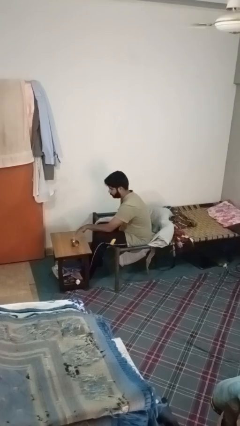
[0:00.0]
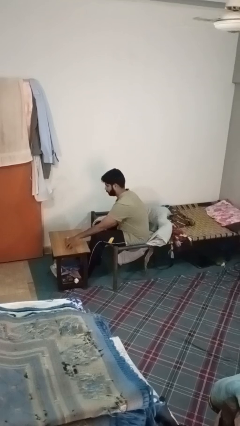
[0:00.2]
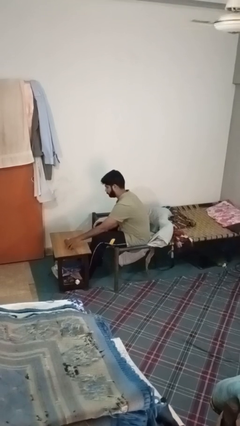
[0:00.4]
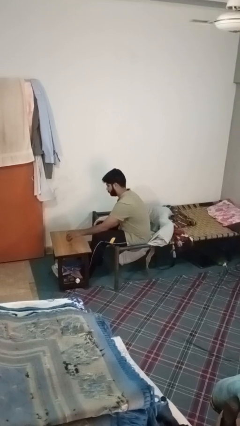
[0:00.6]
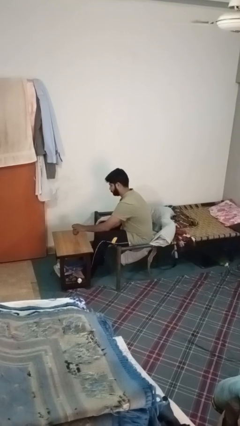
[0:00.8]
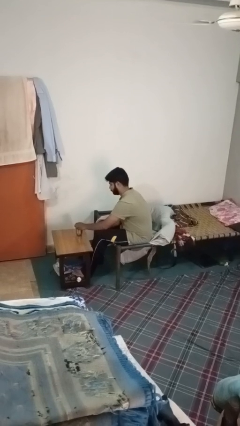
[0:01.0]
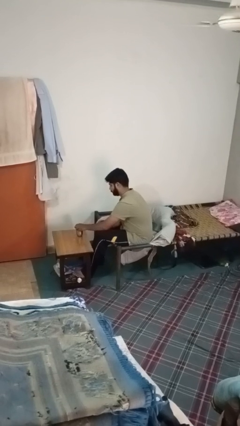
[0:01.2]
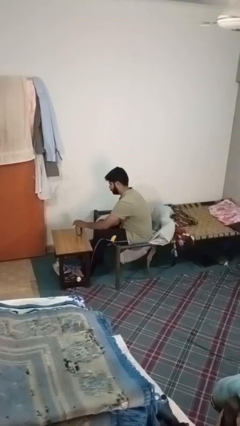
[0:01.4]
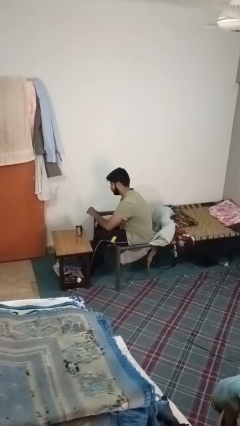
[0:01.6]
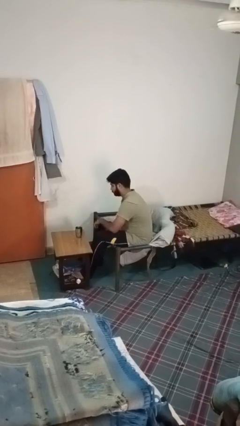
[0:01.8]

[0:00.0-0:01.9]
person sets upright glass

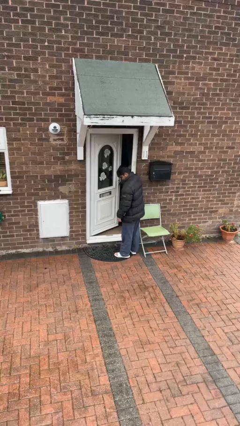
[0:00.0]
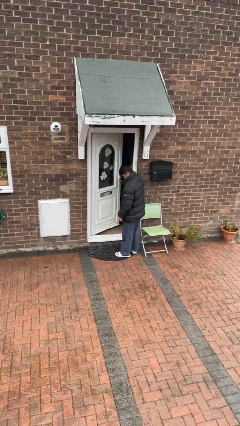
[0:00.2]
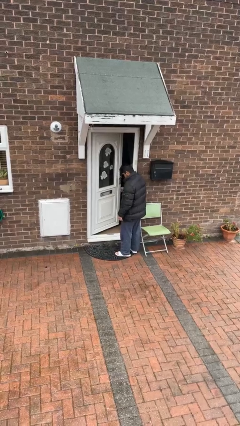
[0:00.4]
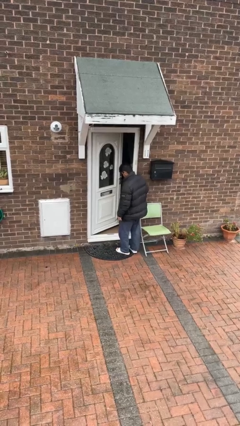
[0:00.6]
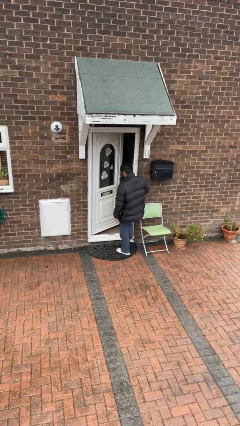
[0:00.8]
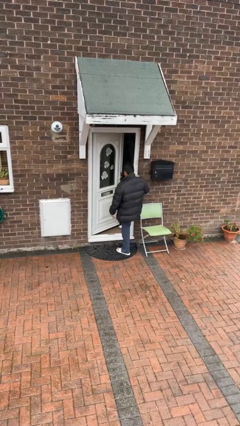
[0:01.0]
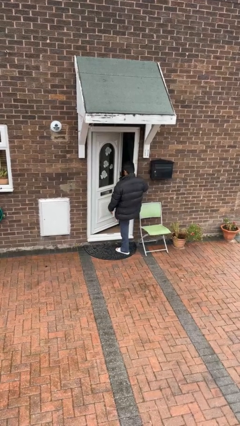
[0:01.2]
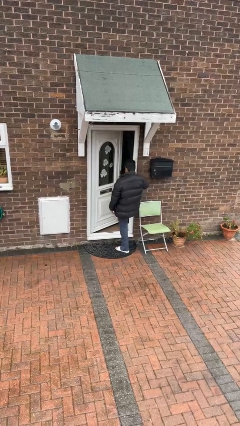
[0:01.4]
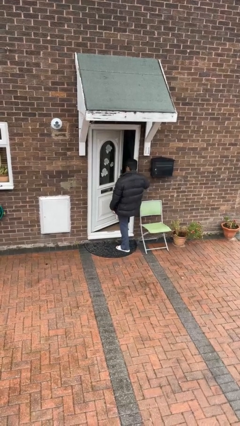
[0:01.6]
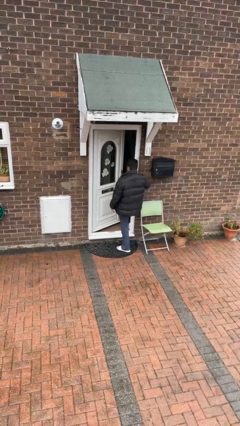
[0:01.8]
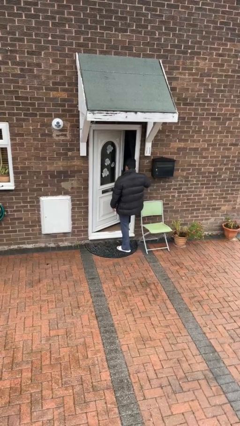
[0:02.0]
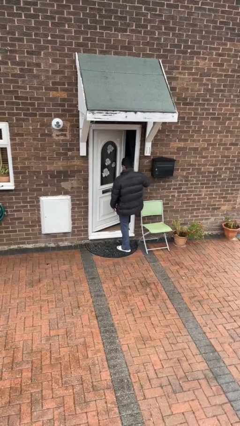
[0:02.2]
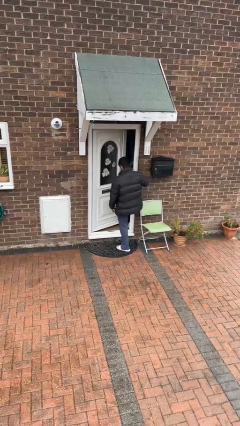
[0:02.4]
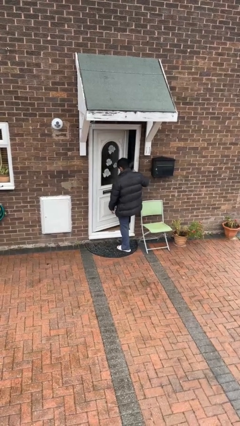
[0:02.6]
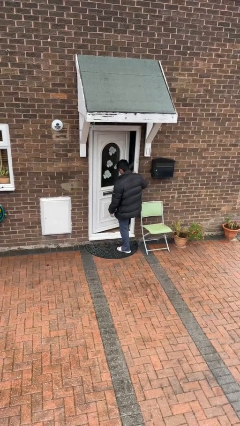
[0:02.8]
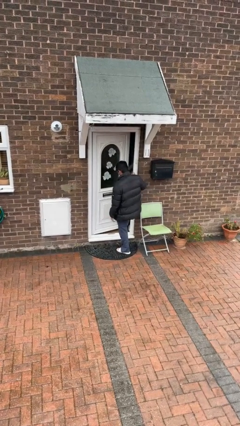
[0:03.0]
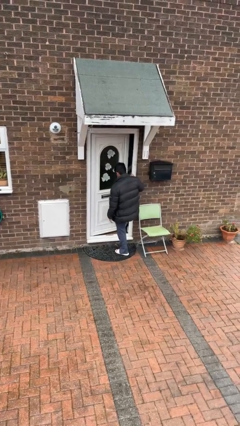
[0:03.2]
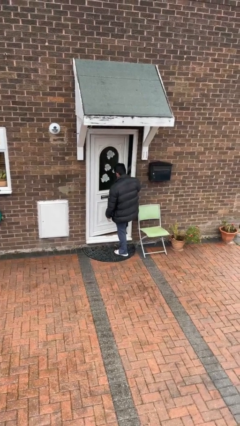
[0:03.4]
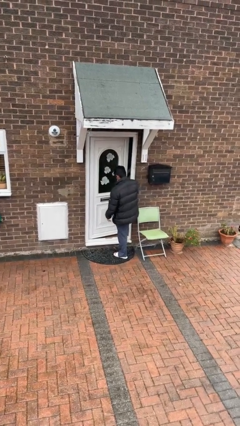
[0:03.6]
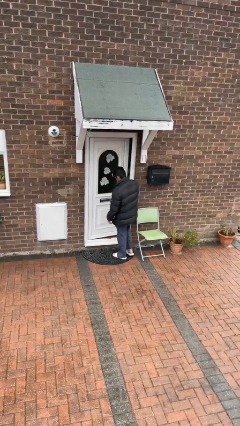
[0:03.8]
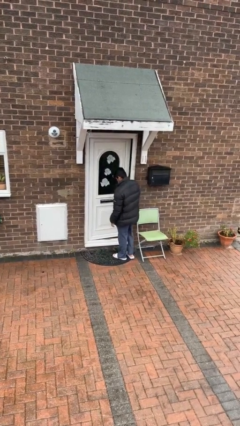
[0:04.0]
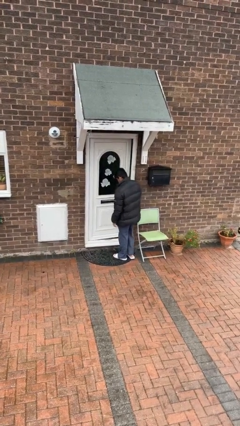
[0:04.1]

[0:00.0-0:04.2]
person closes door with foot

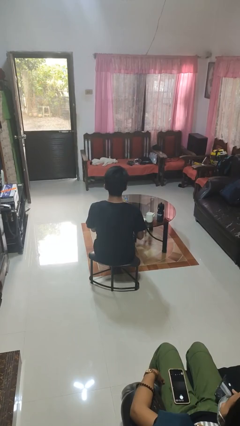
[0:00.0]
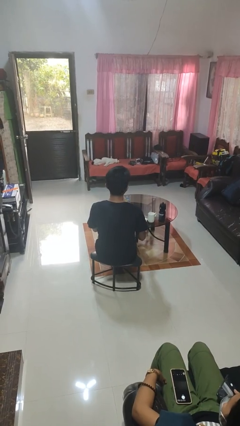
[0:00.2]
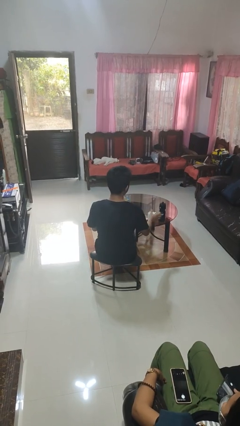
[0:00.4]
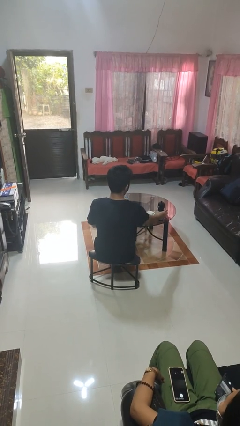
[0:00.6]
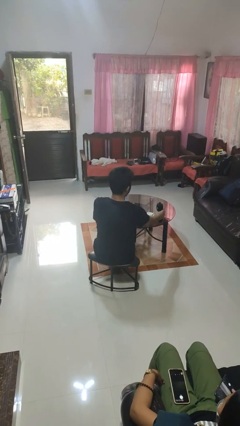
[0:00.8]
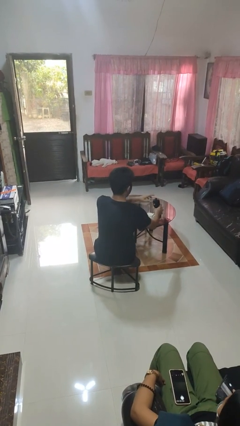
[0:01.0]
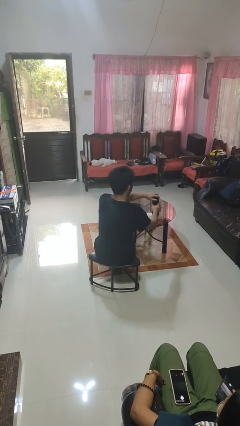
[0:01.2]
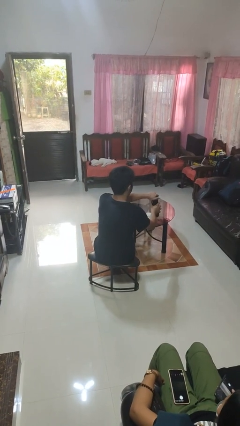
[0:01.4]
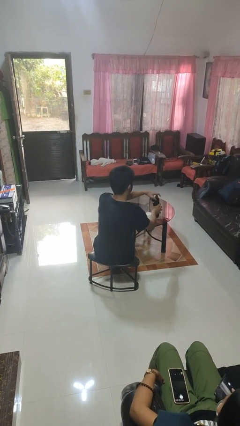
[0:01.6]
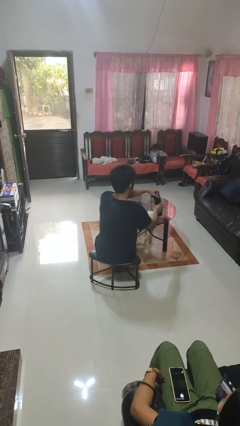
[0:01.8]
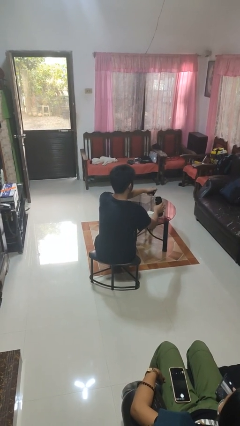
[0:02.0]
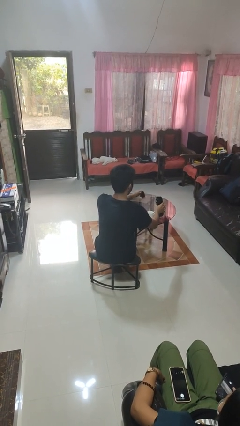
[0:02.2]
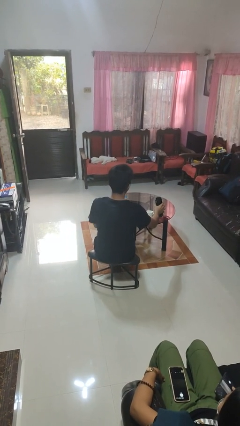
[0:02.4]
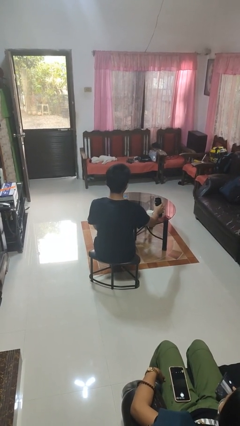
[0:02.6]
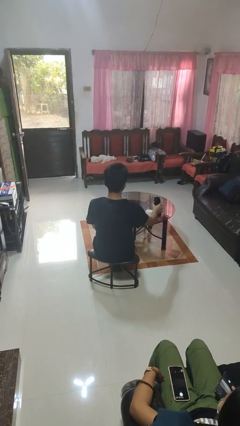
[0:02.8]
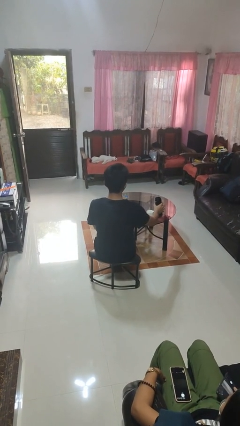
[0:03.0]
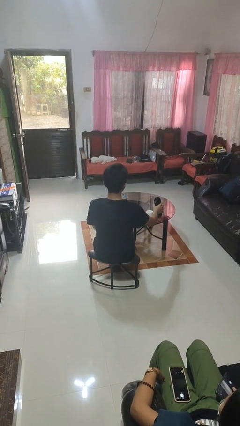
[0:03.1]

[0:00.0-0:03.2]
person unscrews lid from bottle

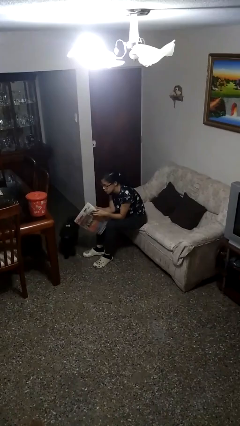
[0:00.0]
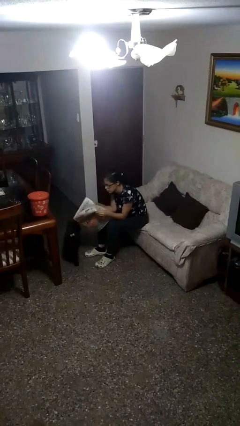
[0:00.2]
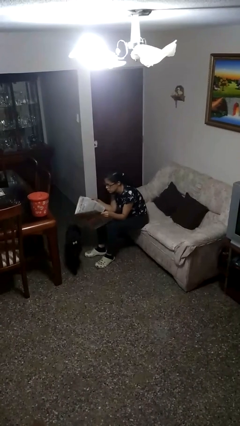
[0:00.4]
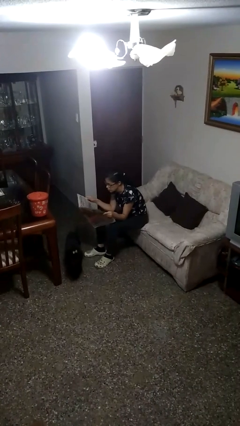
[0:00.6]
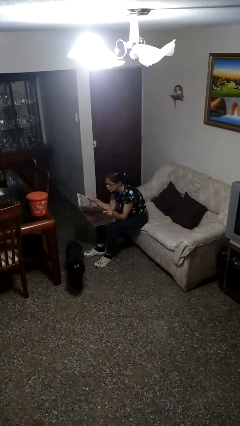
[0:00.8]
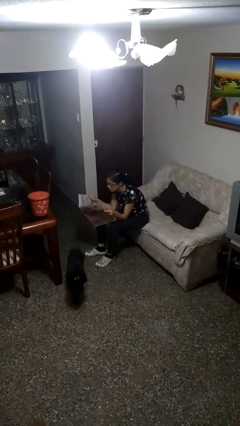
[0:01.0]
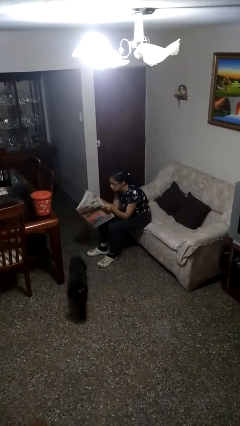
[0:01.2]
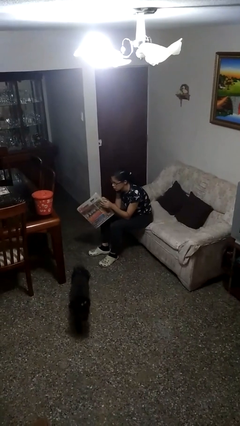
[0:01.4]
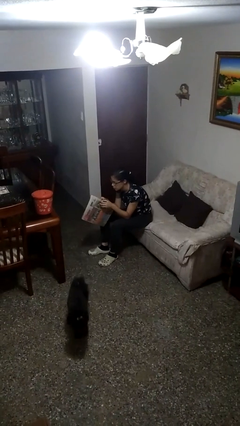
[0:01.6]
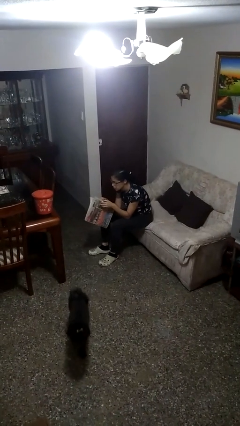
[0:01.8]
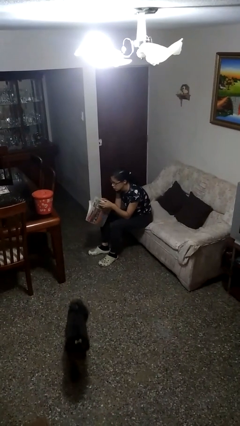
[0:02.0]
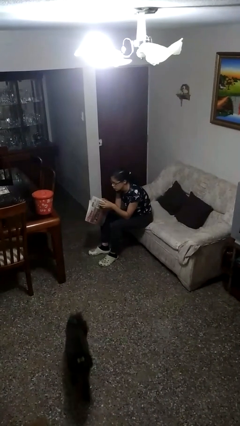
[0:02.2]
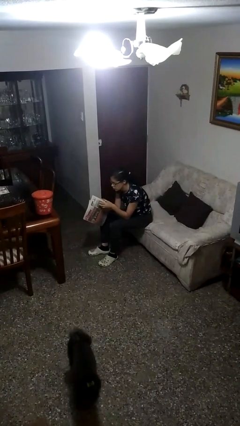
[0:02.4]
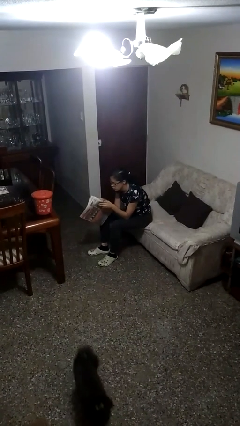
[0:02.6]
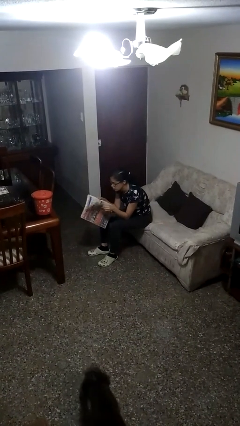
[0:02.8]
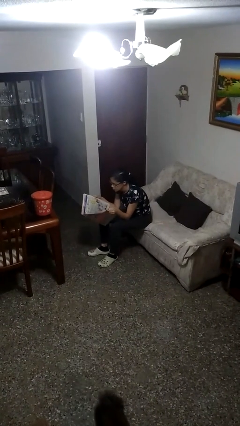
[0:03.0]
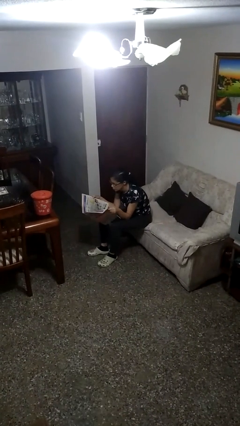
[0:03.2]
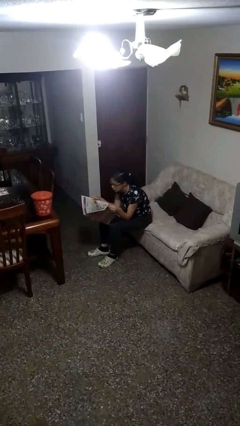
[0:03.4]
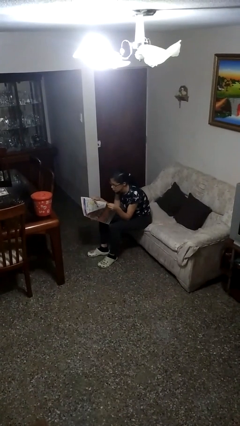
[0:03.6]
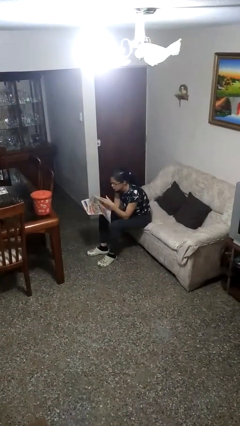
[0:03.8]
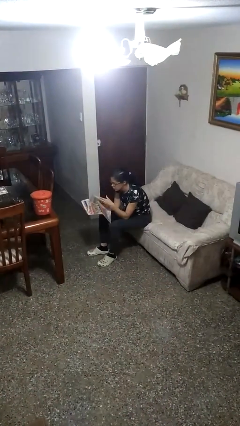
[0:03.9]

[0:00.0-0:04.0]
person reads newspaper

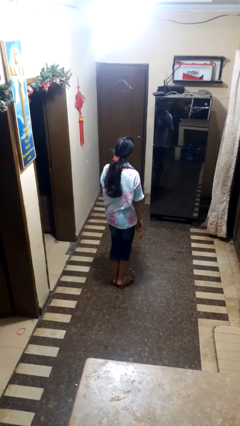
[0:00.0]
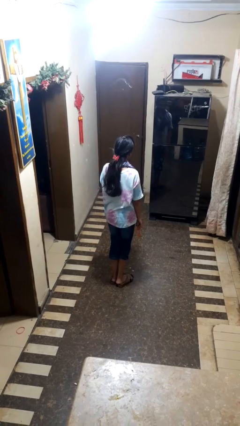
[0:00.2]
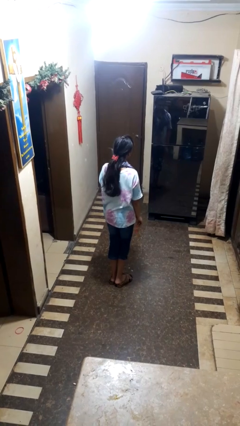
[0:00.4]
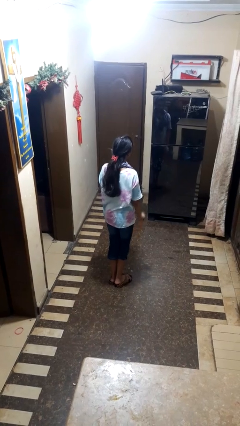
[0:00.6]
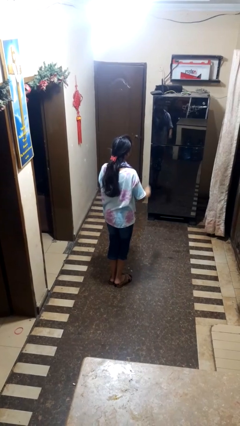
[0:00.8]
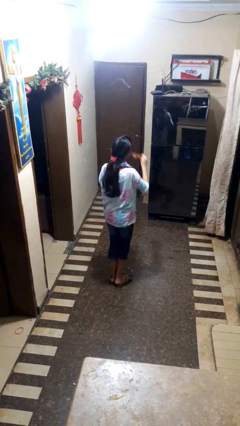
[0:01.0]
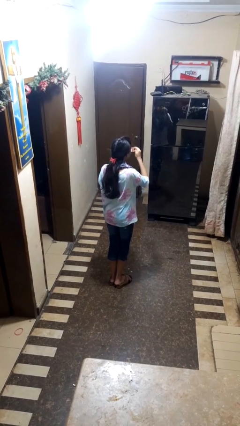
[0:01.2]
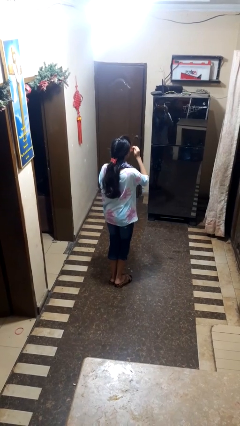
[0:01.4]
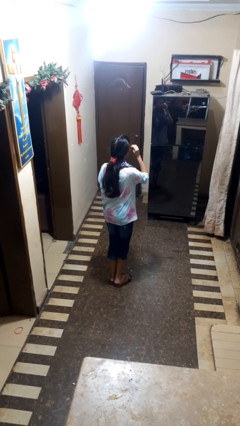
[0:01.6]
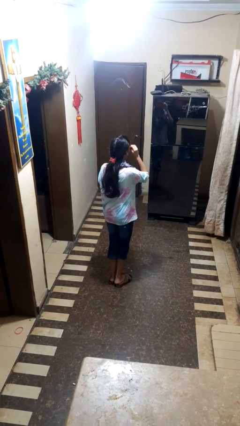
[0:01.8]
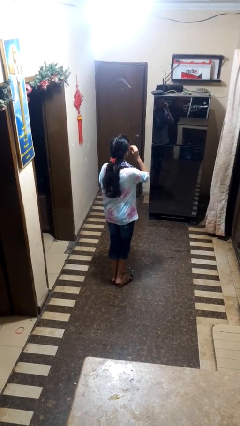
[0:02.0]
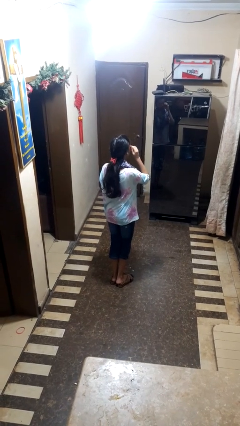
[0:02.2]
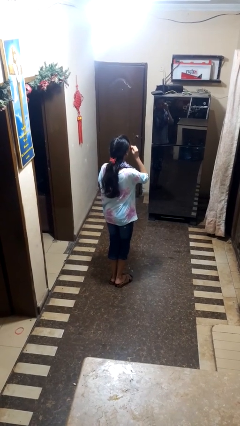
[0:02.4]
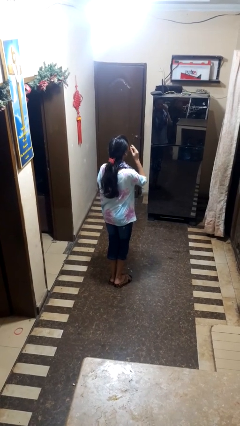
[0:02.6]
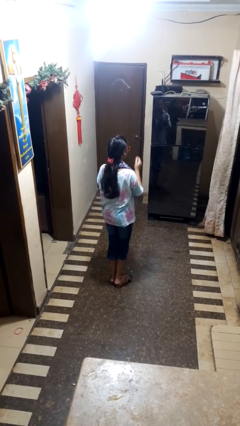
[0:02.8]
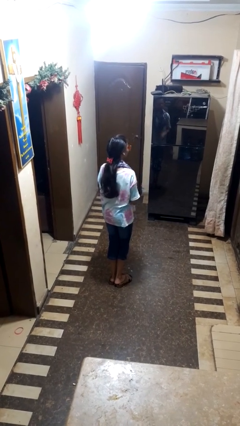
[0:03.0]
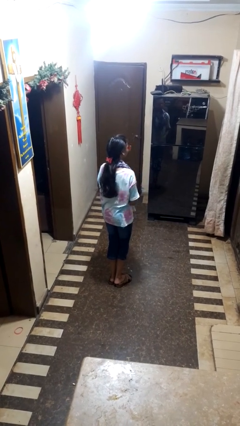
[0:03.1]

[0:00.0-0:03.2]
person puts on sunglasses

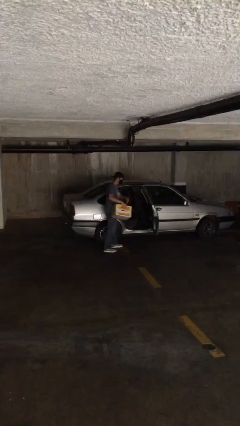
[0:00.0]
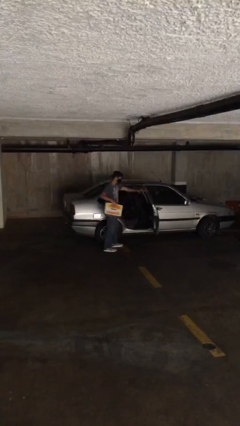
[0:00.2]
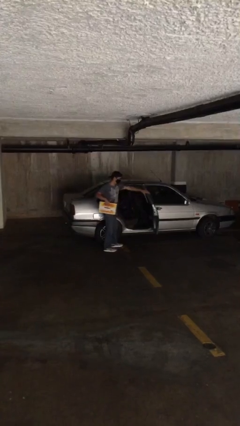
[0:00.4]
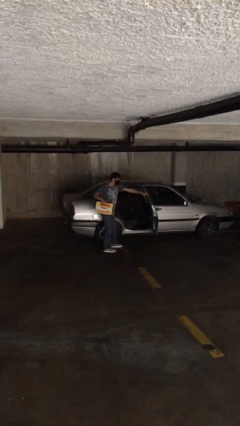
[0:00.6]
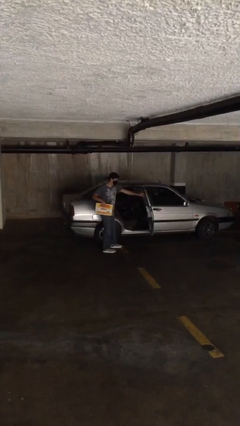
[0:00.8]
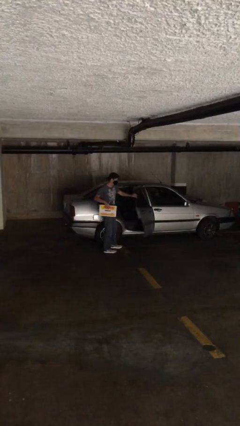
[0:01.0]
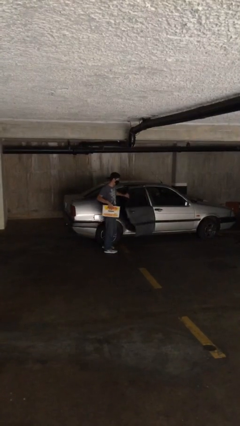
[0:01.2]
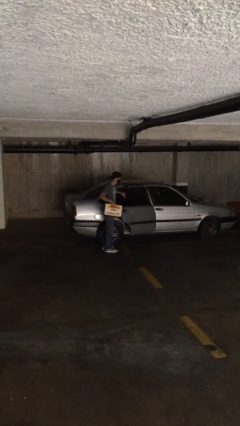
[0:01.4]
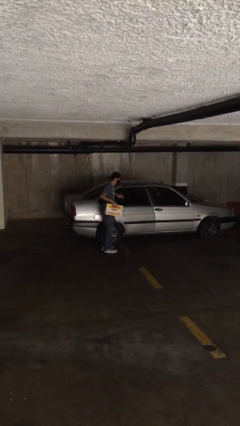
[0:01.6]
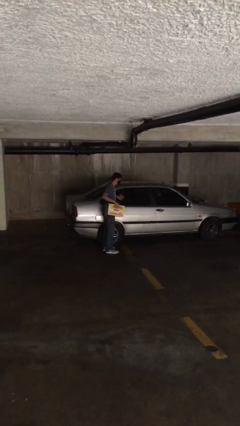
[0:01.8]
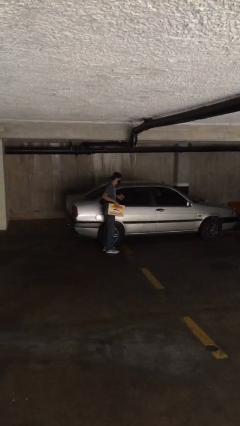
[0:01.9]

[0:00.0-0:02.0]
person closes car door
